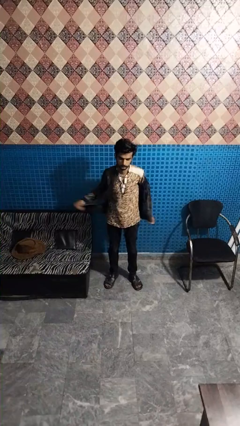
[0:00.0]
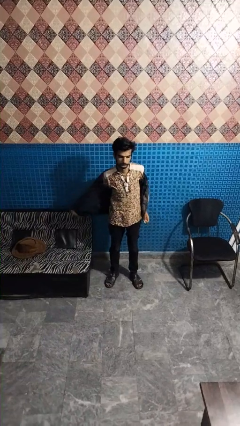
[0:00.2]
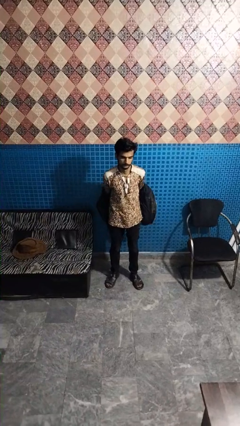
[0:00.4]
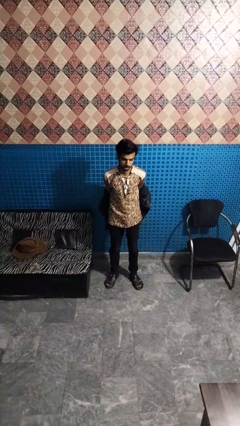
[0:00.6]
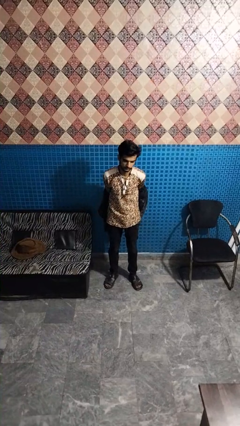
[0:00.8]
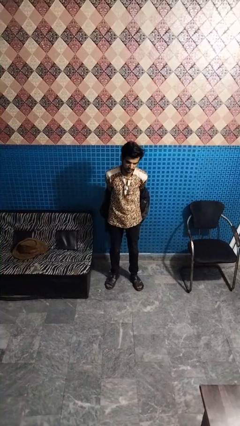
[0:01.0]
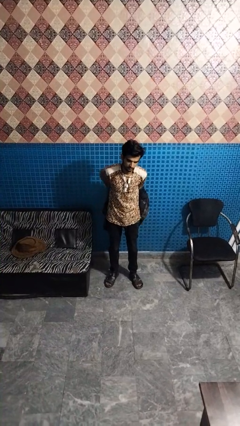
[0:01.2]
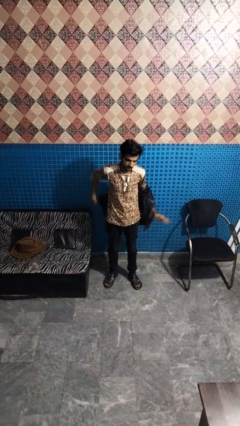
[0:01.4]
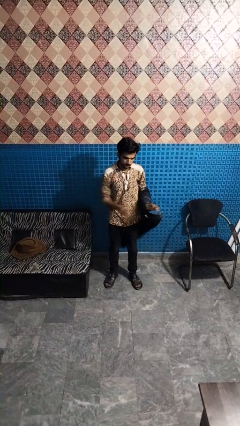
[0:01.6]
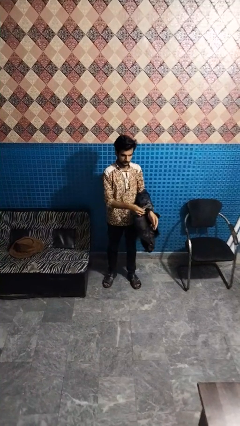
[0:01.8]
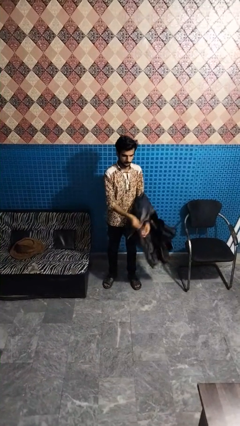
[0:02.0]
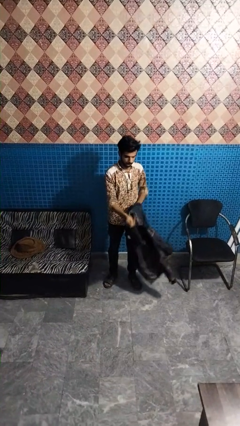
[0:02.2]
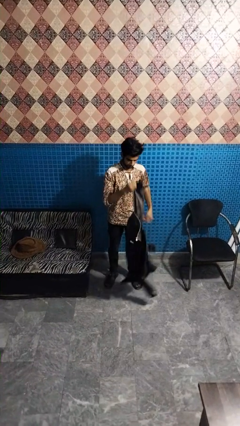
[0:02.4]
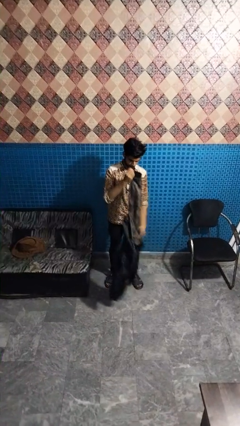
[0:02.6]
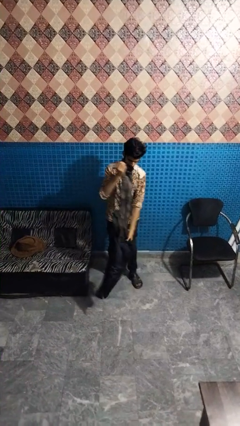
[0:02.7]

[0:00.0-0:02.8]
person takes off jacket

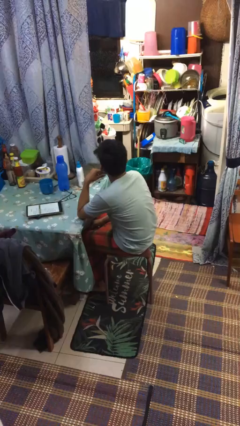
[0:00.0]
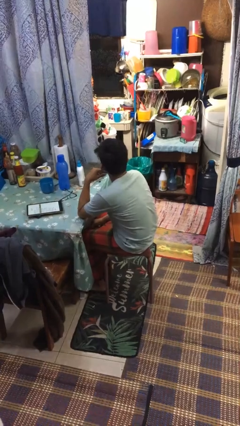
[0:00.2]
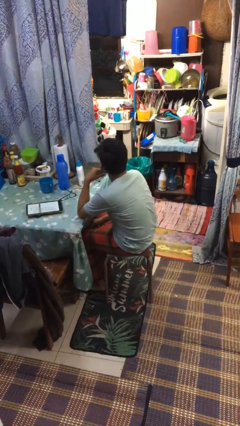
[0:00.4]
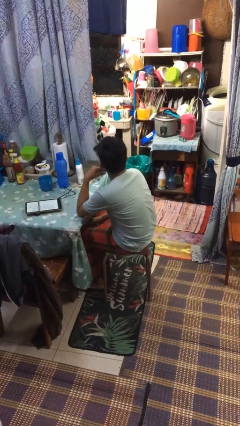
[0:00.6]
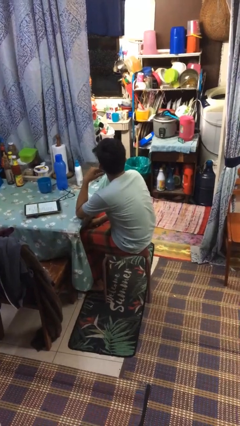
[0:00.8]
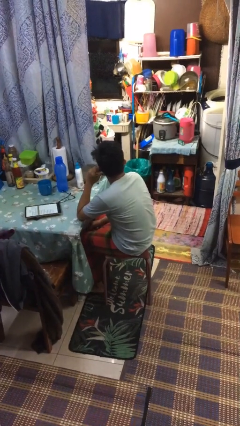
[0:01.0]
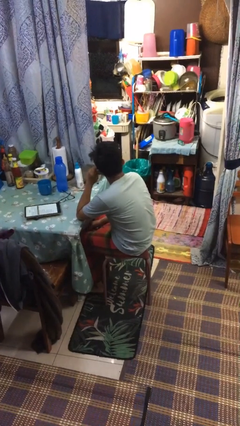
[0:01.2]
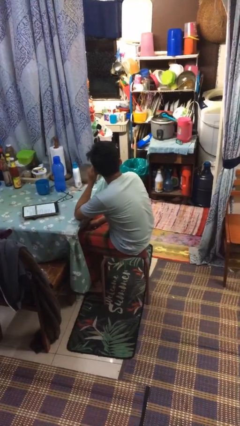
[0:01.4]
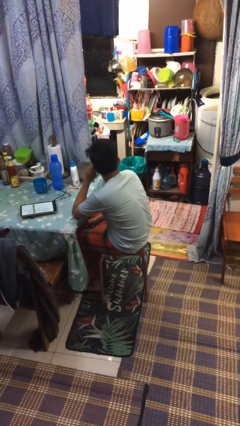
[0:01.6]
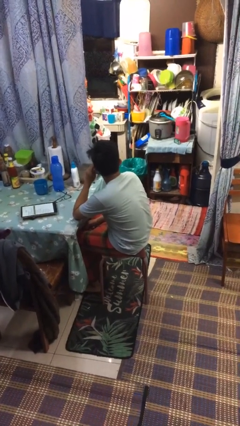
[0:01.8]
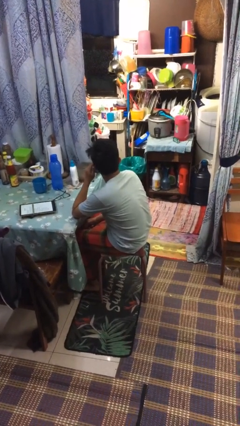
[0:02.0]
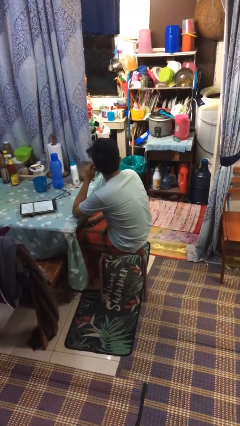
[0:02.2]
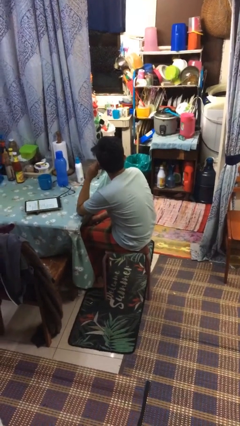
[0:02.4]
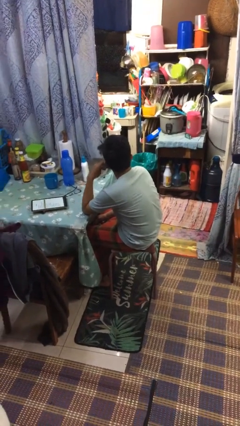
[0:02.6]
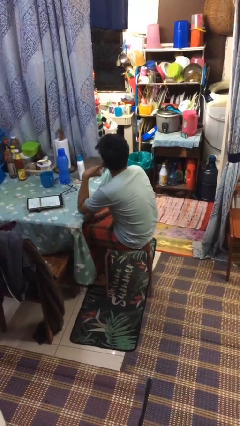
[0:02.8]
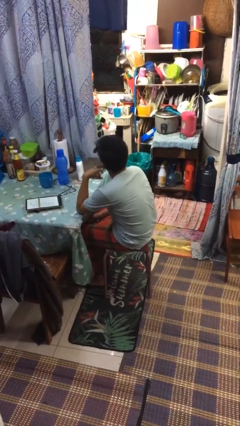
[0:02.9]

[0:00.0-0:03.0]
person touches earlobe

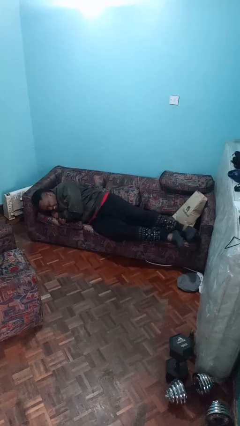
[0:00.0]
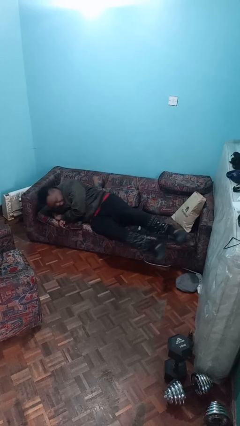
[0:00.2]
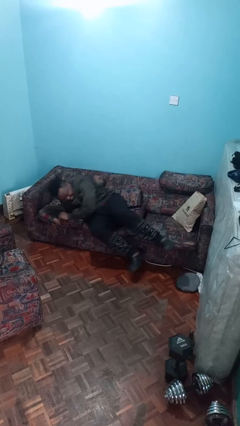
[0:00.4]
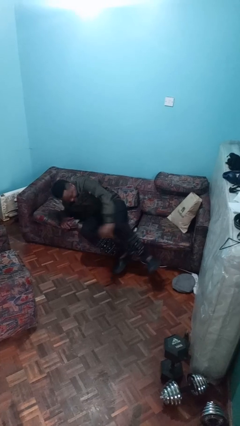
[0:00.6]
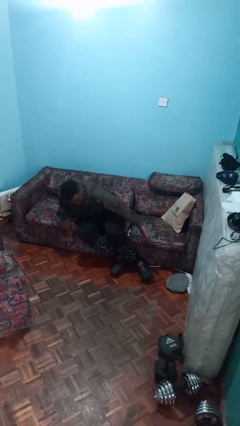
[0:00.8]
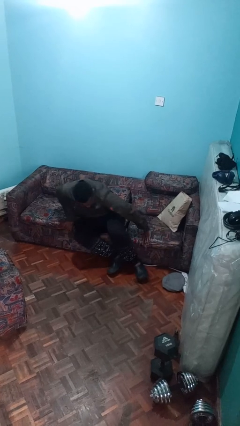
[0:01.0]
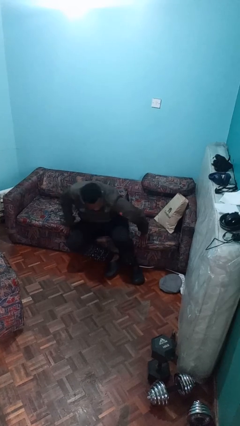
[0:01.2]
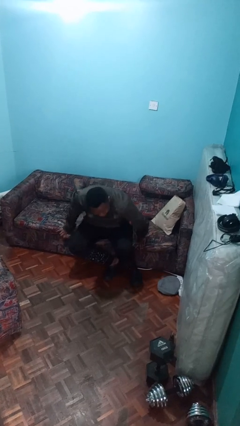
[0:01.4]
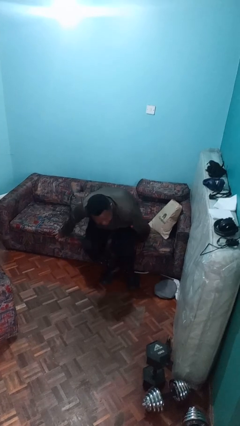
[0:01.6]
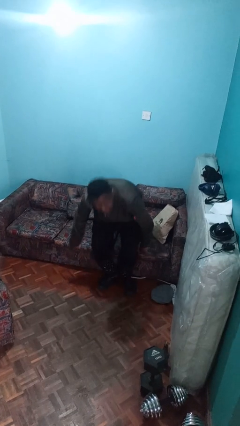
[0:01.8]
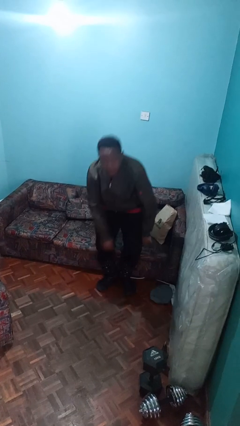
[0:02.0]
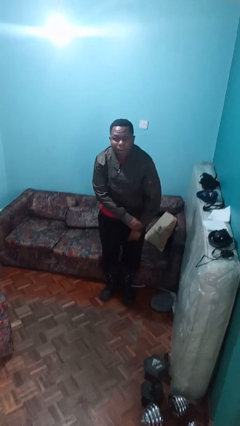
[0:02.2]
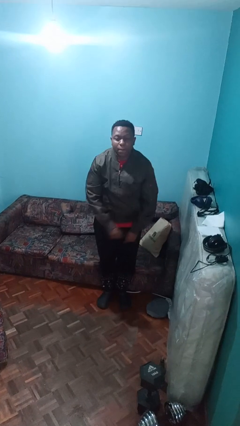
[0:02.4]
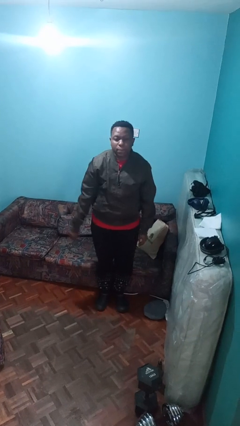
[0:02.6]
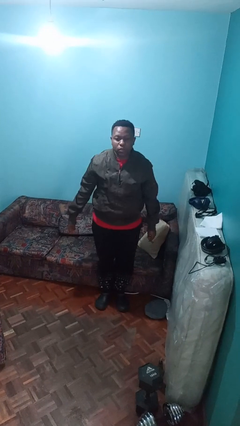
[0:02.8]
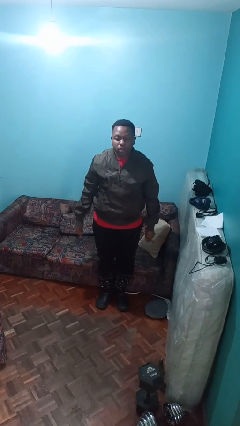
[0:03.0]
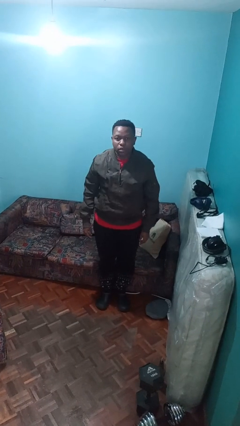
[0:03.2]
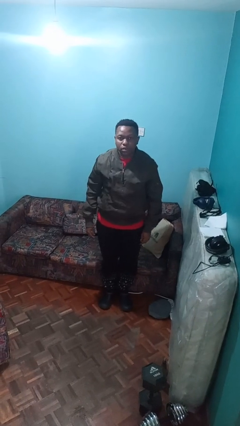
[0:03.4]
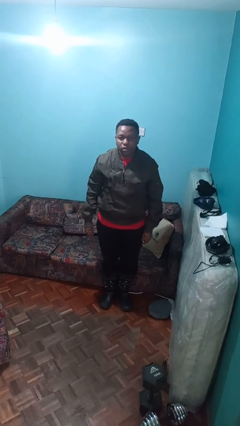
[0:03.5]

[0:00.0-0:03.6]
person stands up

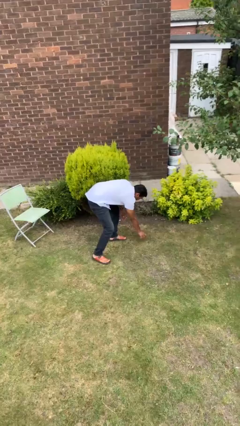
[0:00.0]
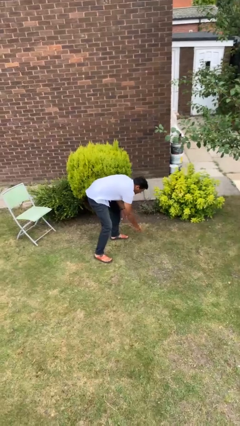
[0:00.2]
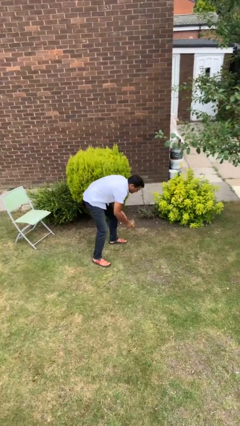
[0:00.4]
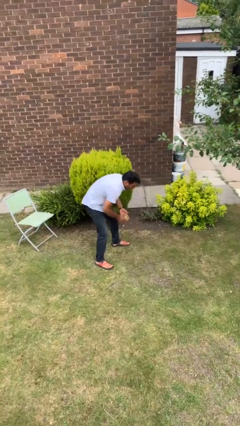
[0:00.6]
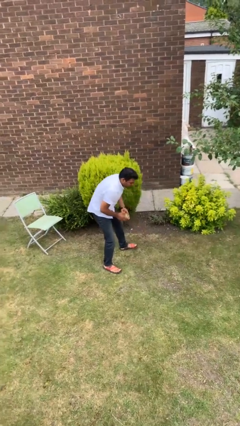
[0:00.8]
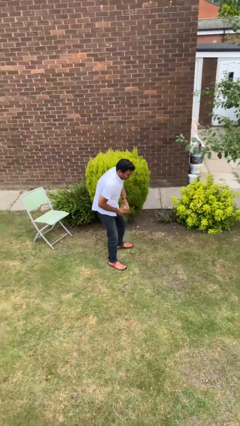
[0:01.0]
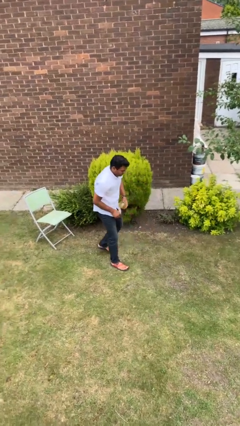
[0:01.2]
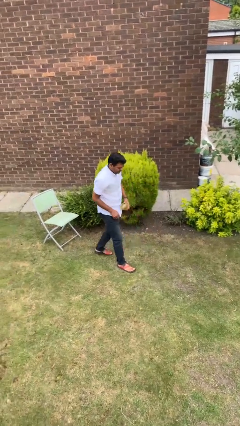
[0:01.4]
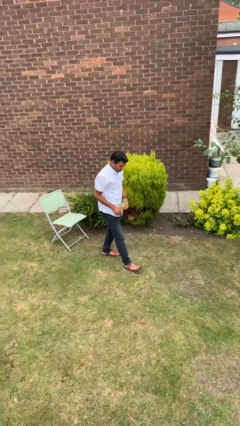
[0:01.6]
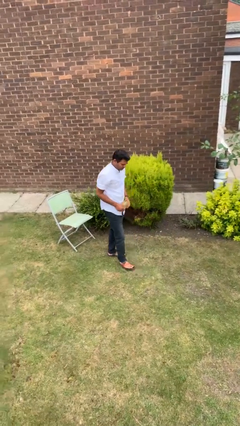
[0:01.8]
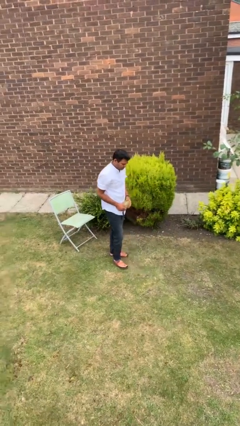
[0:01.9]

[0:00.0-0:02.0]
person picks up object from floor

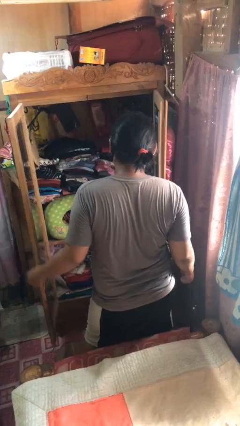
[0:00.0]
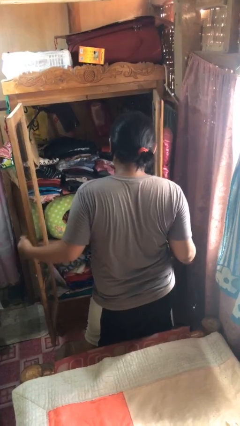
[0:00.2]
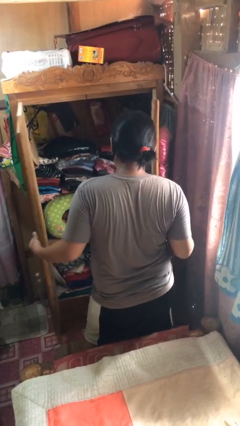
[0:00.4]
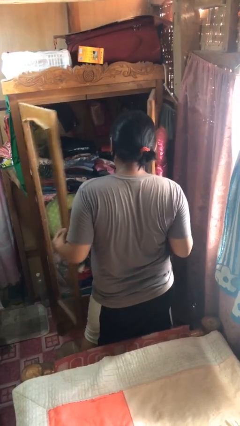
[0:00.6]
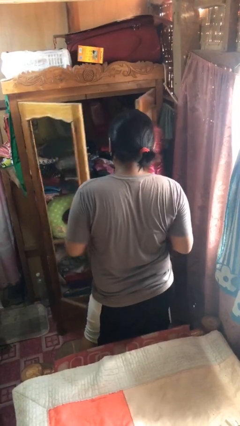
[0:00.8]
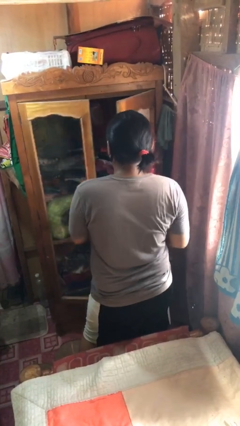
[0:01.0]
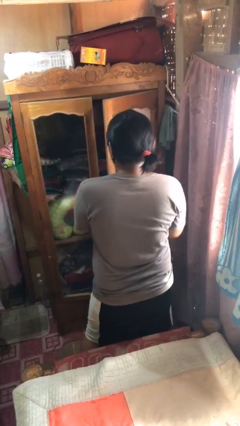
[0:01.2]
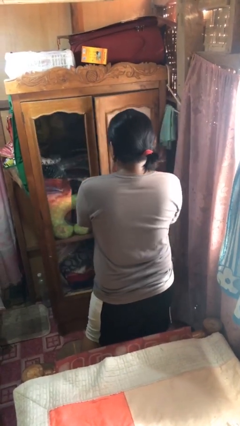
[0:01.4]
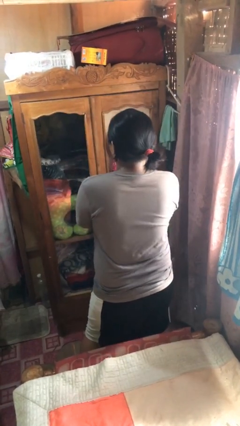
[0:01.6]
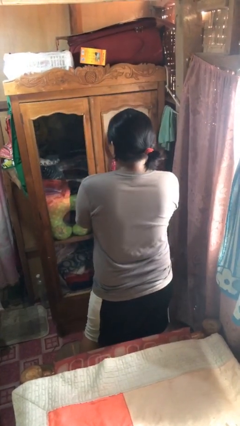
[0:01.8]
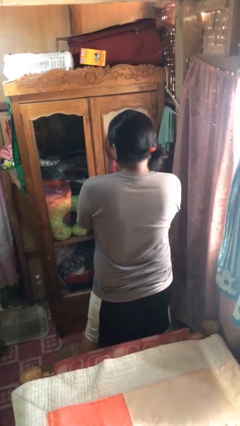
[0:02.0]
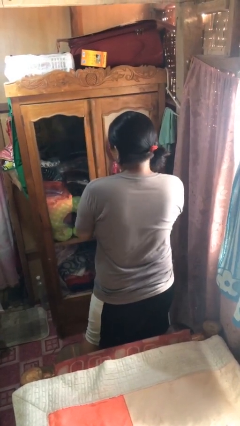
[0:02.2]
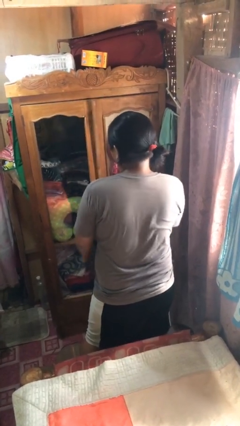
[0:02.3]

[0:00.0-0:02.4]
person closes closet door

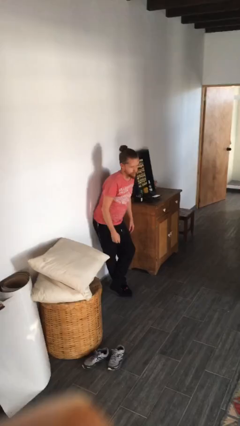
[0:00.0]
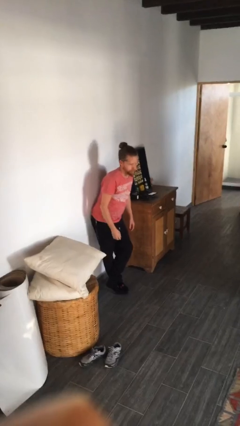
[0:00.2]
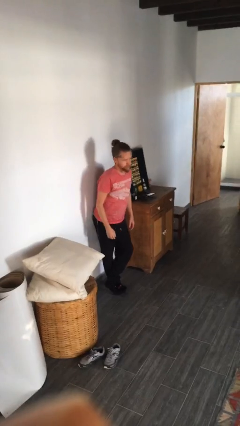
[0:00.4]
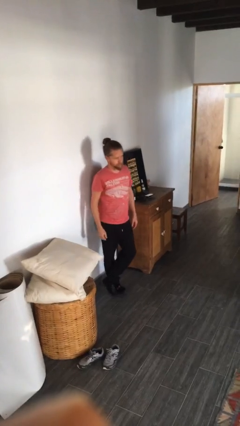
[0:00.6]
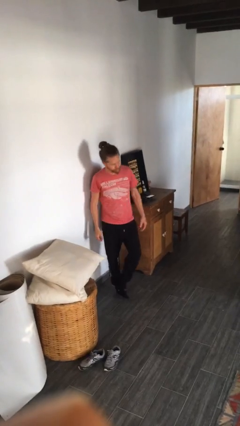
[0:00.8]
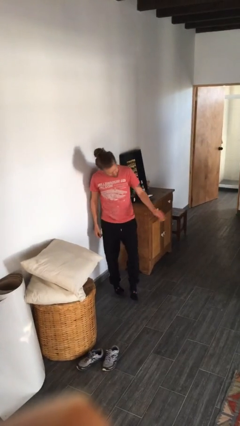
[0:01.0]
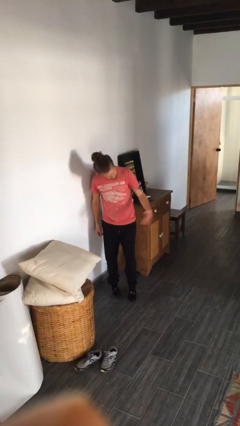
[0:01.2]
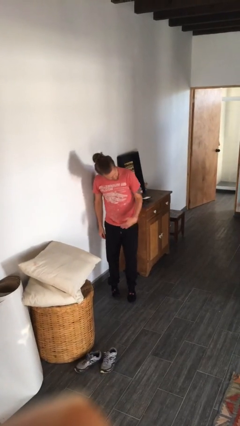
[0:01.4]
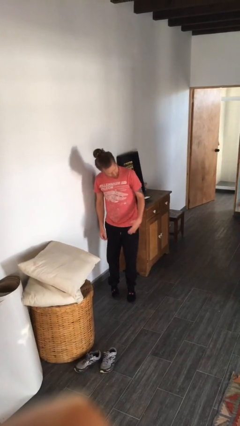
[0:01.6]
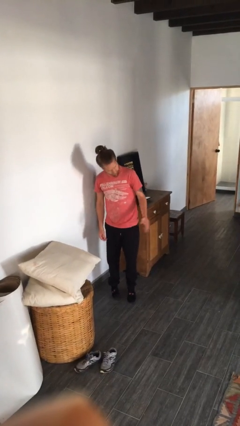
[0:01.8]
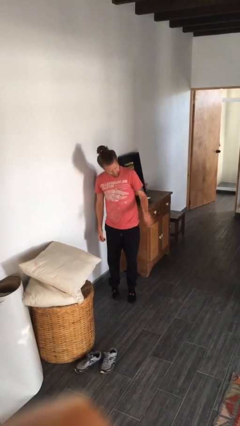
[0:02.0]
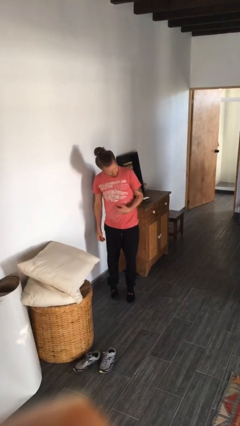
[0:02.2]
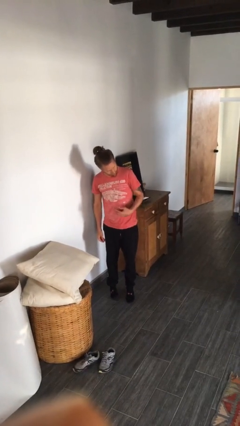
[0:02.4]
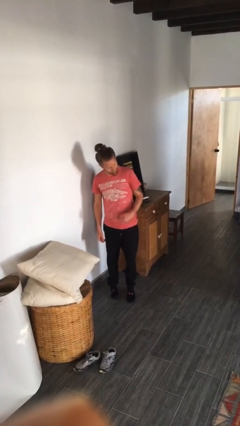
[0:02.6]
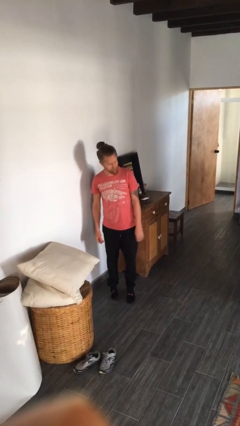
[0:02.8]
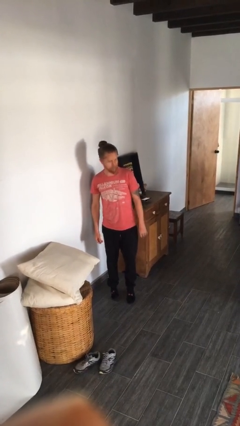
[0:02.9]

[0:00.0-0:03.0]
person gestures come here

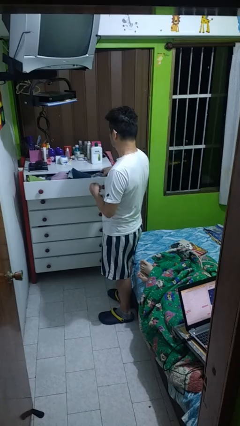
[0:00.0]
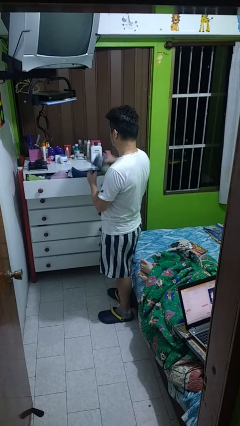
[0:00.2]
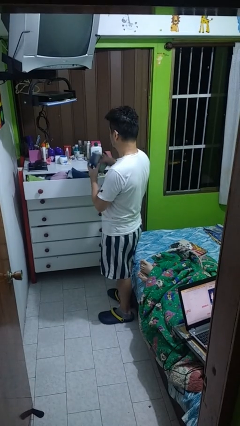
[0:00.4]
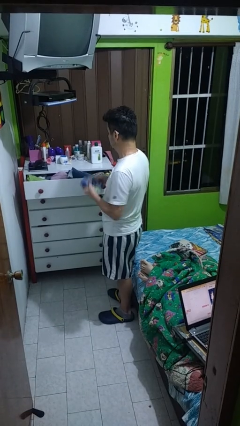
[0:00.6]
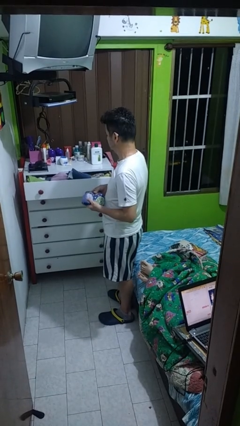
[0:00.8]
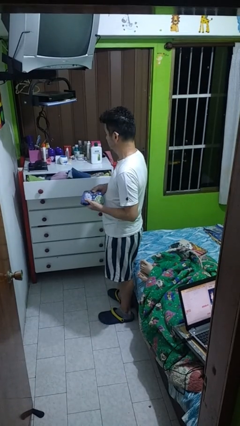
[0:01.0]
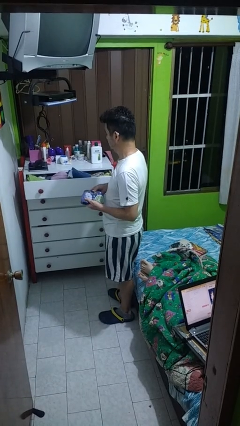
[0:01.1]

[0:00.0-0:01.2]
person takes clothes from dresser
